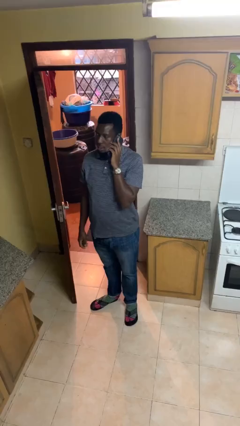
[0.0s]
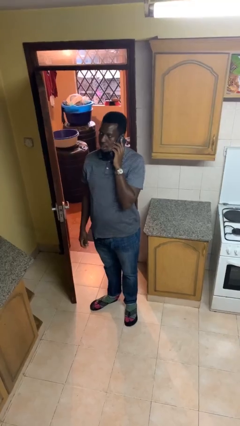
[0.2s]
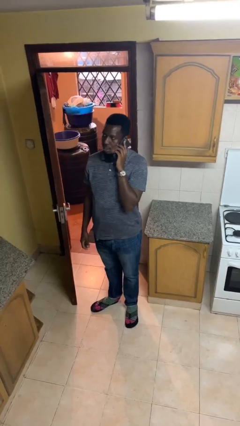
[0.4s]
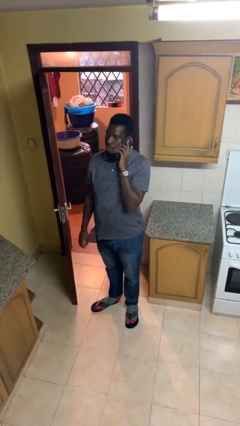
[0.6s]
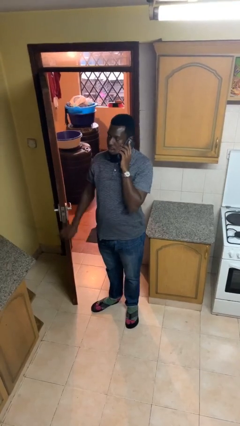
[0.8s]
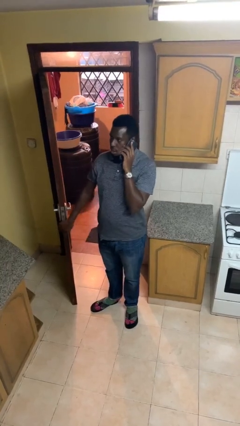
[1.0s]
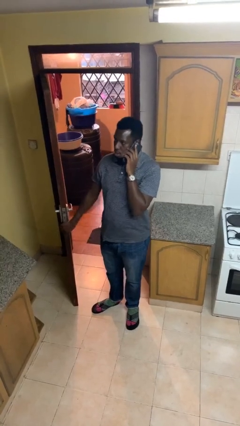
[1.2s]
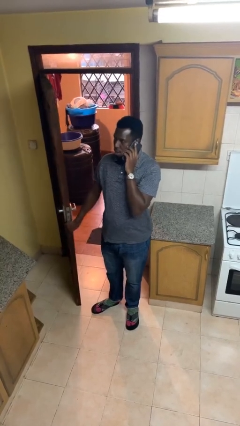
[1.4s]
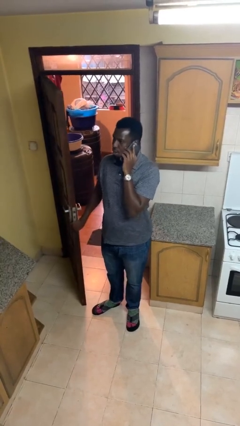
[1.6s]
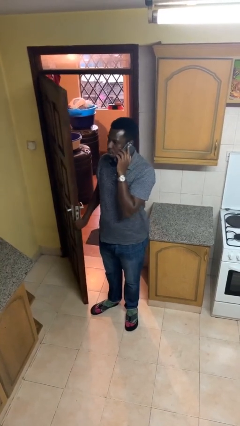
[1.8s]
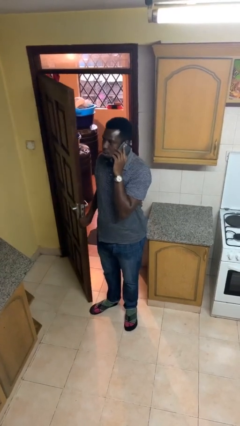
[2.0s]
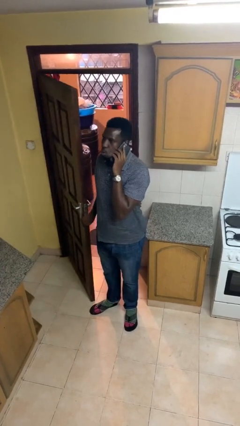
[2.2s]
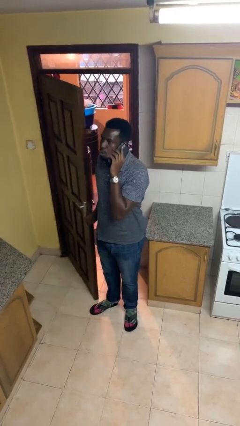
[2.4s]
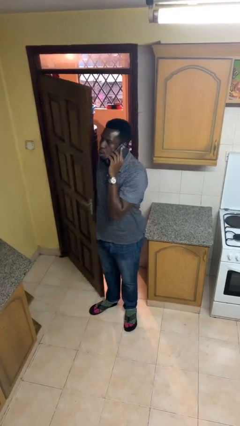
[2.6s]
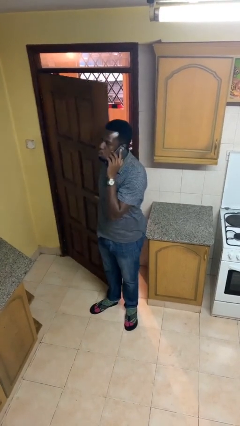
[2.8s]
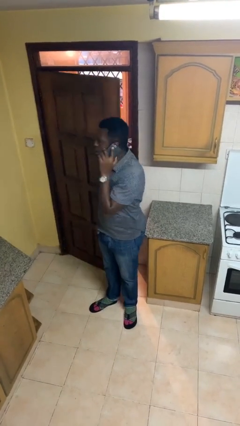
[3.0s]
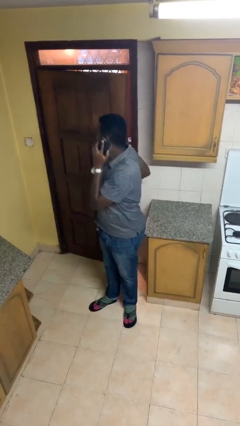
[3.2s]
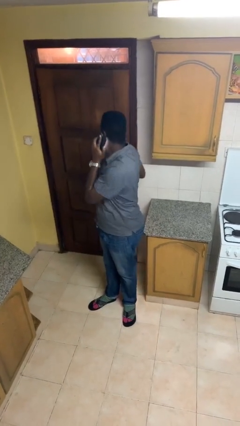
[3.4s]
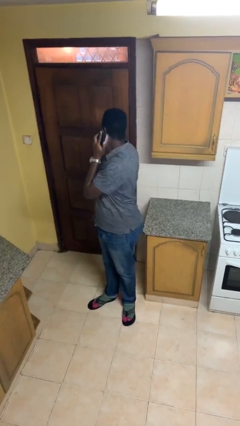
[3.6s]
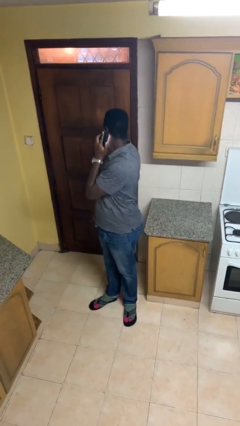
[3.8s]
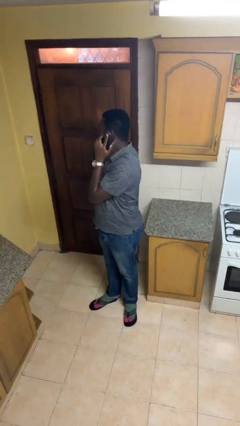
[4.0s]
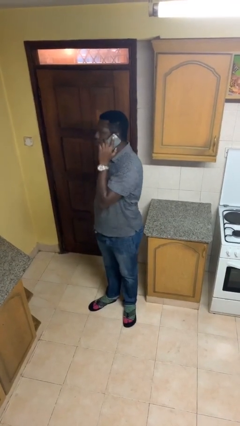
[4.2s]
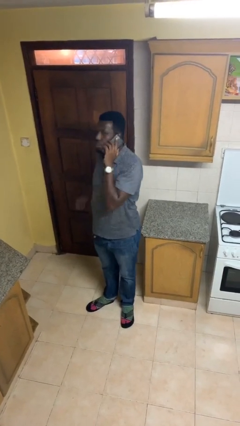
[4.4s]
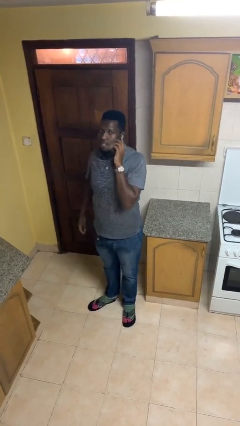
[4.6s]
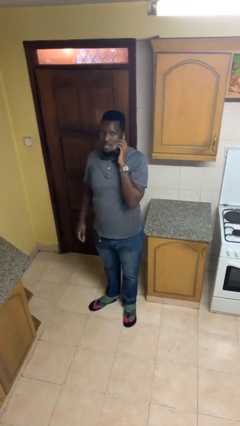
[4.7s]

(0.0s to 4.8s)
person closes facility door

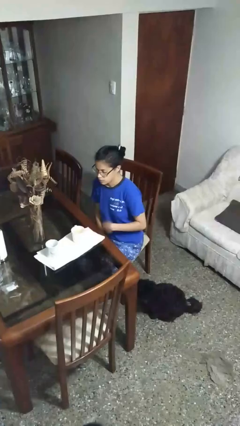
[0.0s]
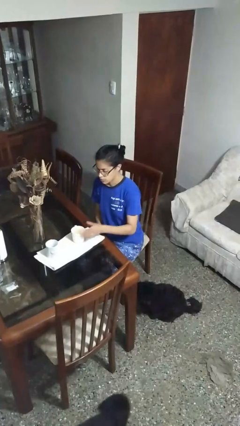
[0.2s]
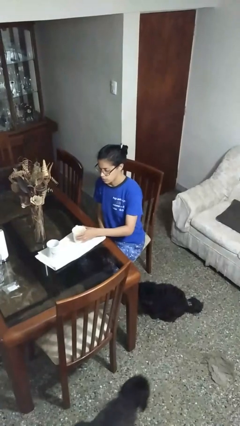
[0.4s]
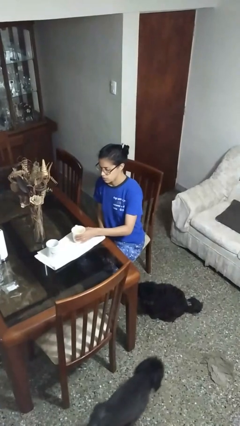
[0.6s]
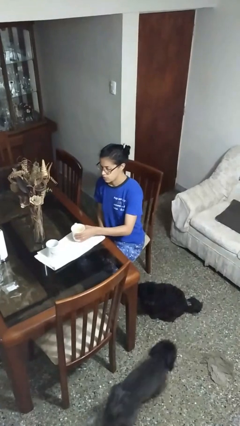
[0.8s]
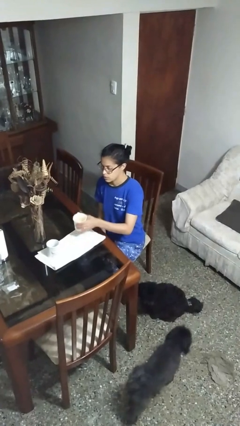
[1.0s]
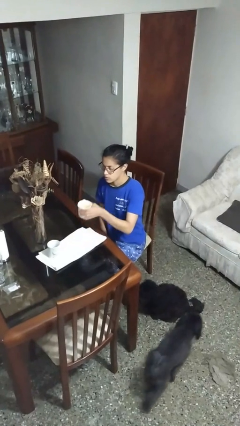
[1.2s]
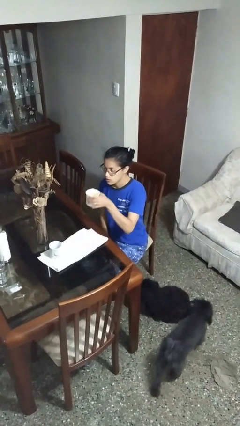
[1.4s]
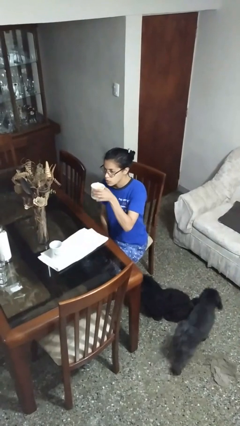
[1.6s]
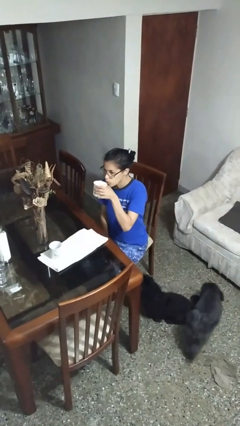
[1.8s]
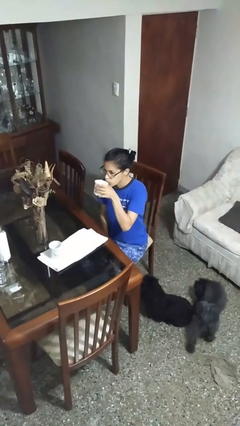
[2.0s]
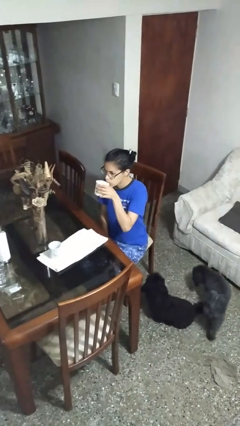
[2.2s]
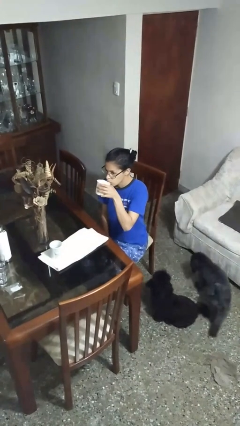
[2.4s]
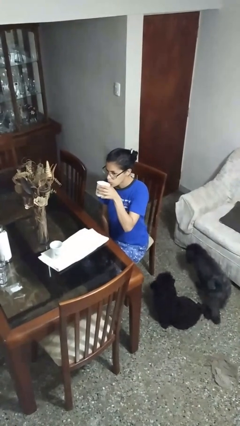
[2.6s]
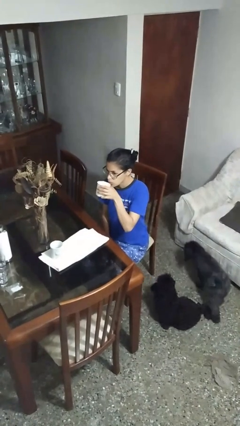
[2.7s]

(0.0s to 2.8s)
person picks up object from table

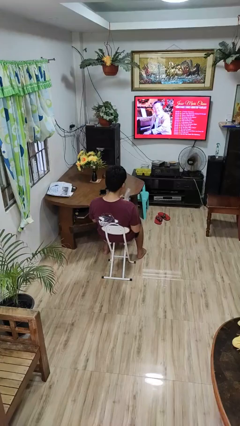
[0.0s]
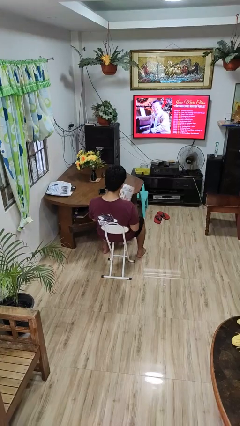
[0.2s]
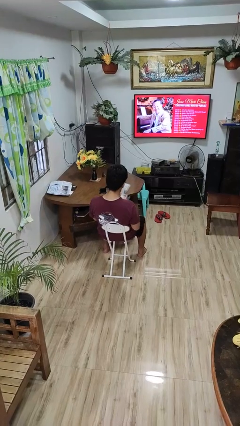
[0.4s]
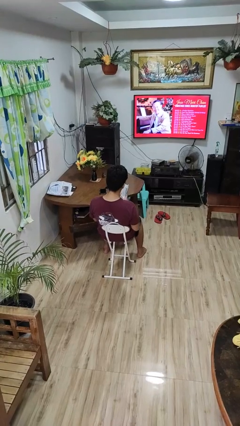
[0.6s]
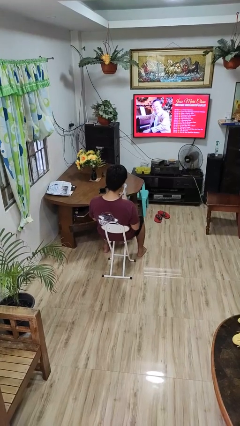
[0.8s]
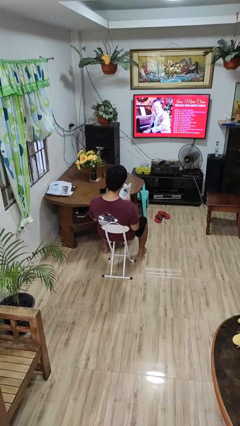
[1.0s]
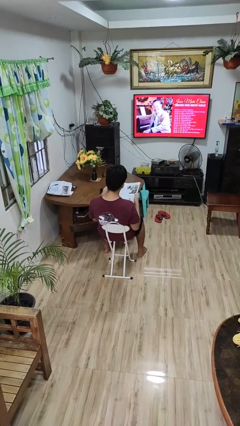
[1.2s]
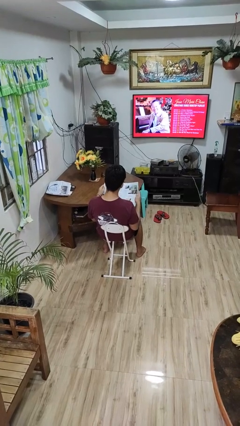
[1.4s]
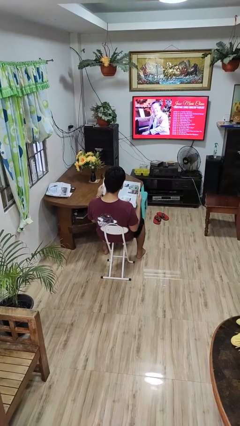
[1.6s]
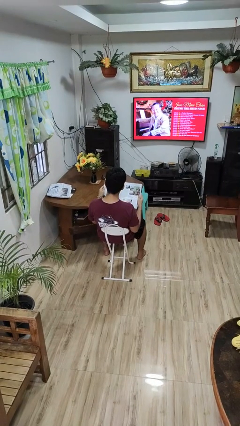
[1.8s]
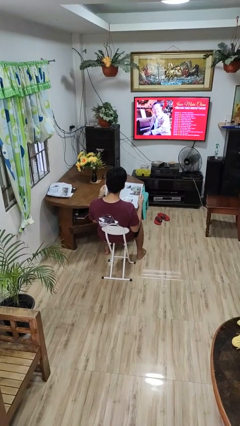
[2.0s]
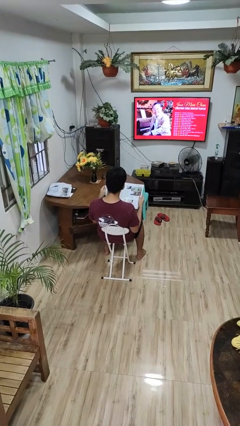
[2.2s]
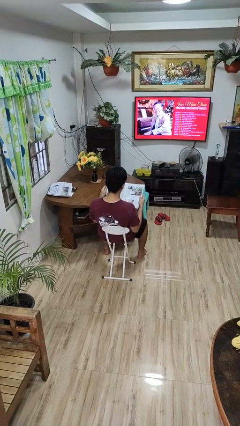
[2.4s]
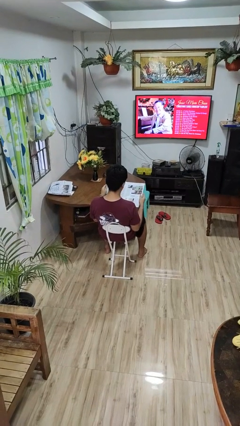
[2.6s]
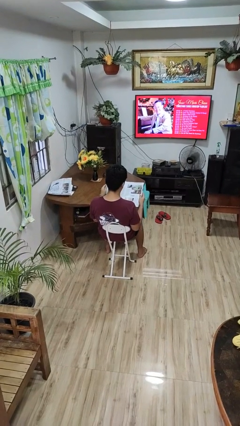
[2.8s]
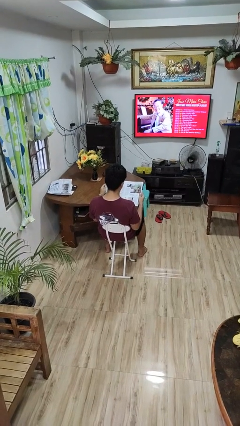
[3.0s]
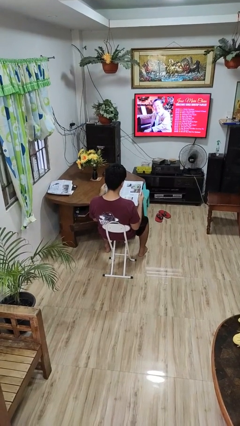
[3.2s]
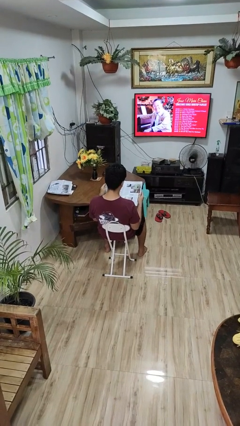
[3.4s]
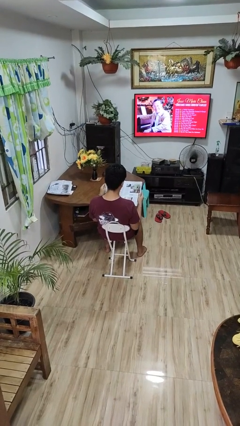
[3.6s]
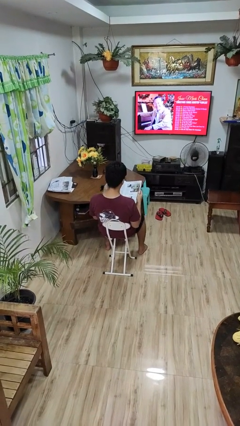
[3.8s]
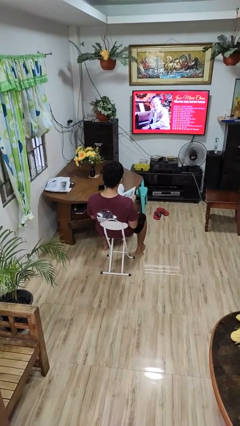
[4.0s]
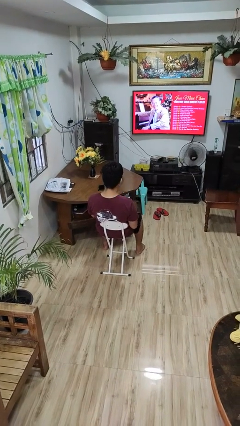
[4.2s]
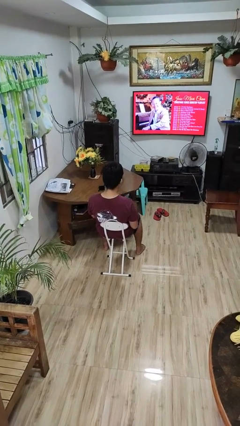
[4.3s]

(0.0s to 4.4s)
person reads magazine

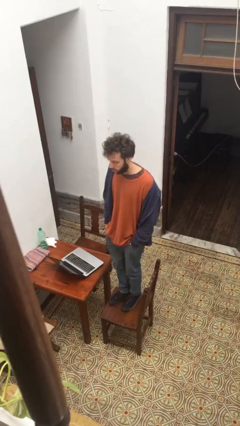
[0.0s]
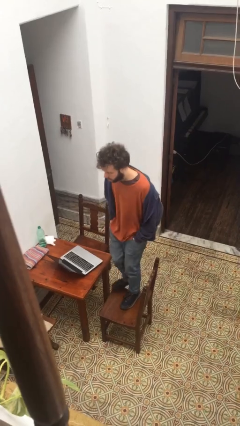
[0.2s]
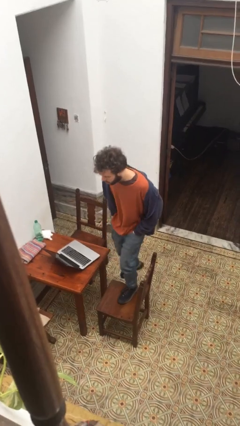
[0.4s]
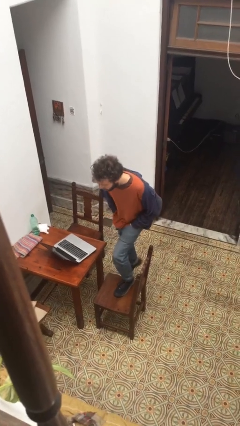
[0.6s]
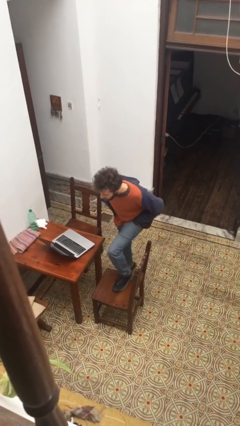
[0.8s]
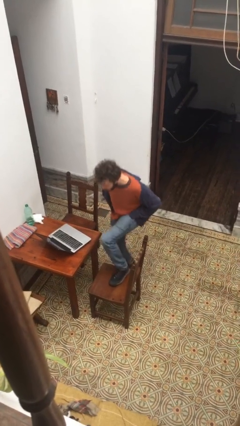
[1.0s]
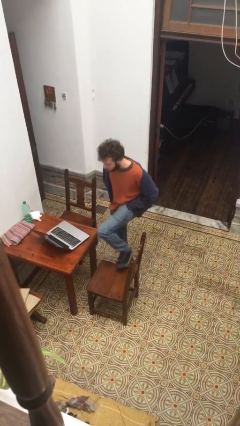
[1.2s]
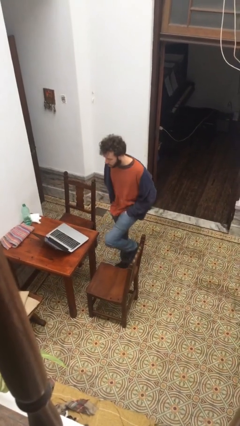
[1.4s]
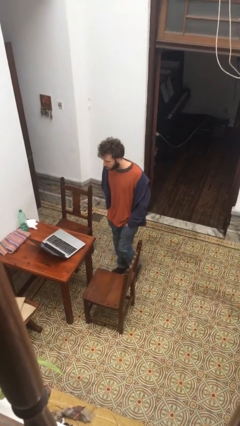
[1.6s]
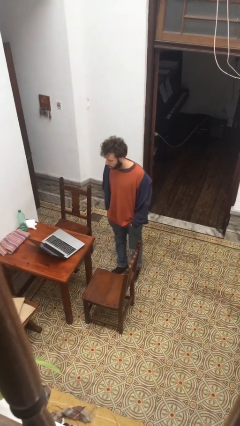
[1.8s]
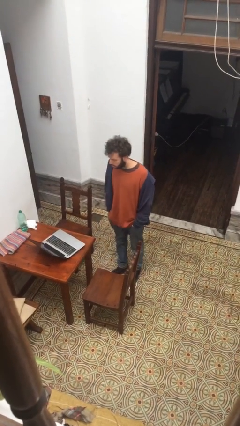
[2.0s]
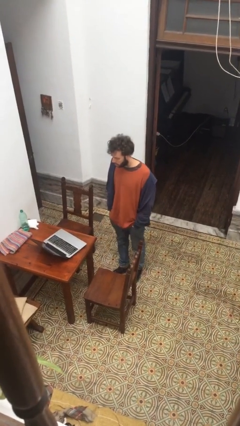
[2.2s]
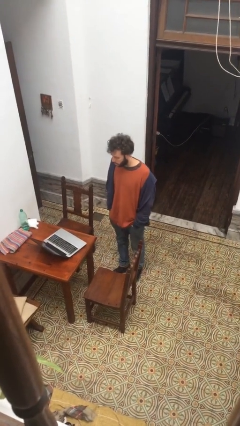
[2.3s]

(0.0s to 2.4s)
person climbs off chair

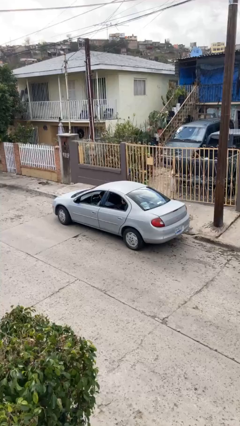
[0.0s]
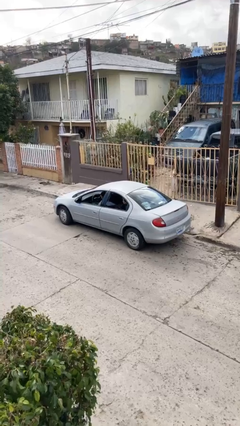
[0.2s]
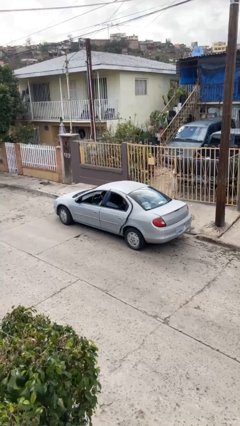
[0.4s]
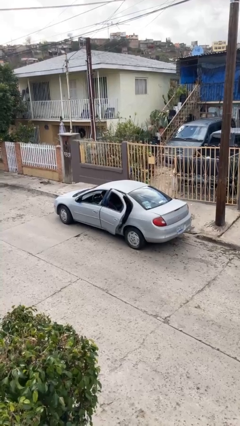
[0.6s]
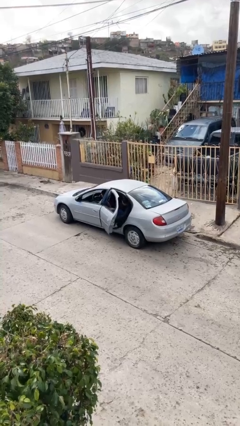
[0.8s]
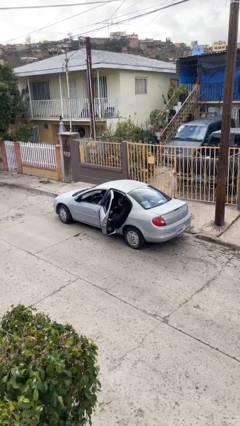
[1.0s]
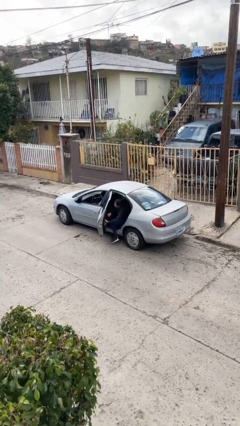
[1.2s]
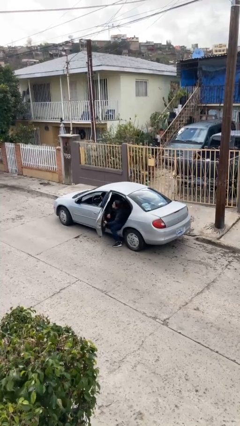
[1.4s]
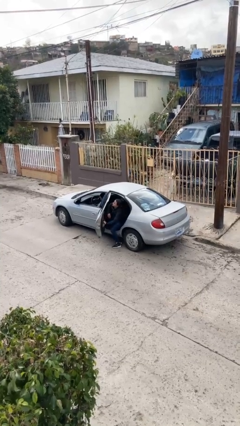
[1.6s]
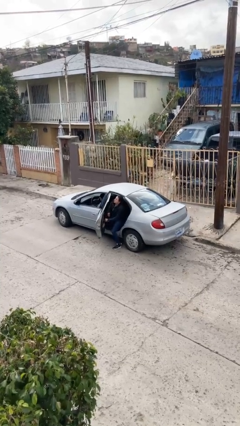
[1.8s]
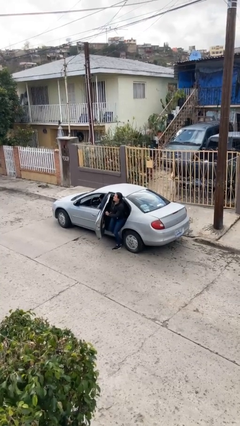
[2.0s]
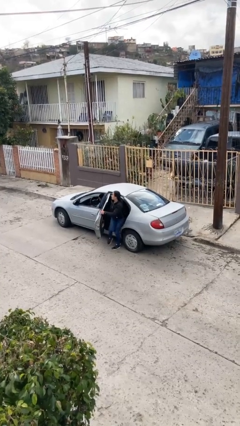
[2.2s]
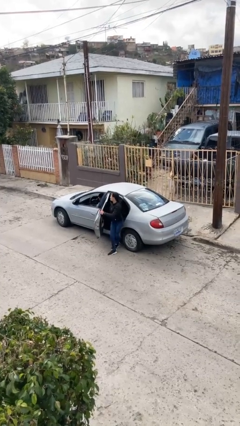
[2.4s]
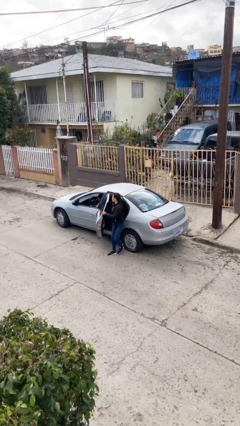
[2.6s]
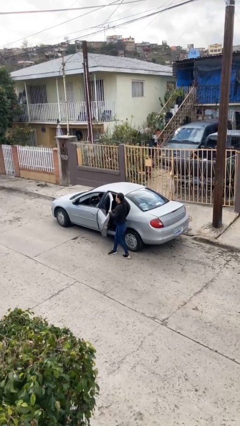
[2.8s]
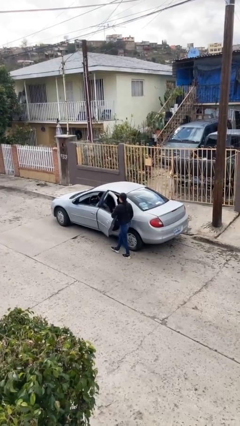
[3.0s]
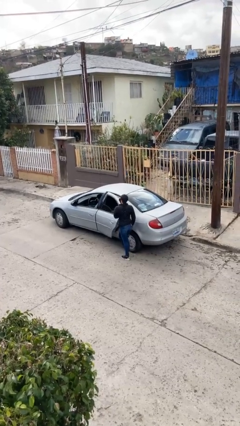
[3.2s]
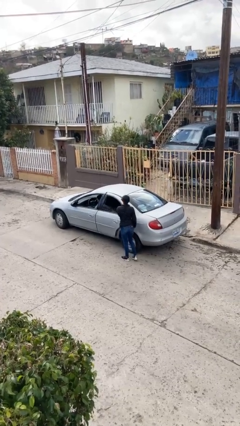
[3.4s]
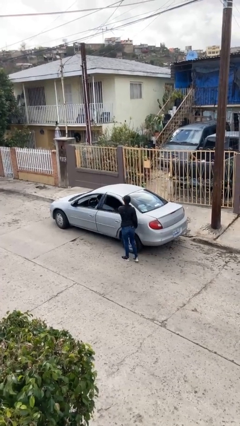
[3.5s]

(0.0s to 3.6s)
car drops off person
